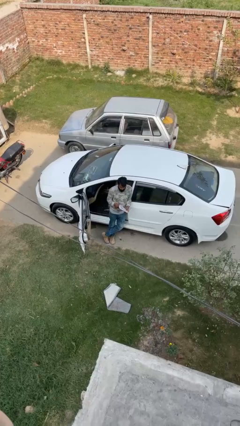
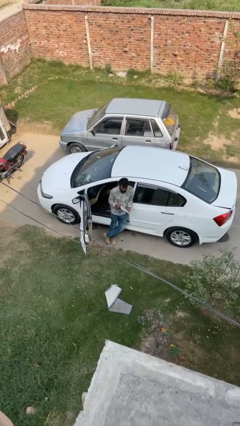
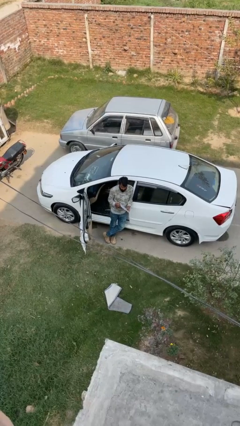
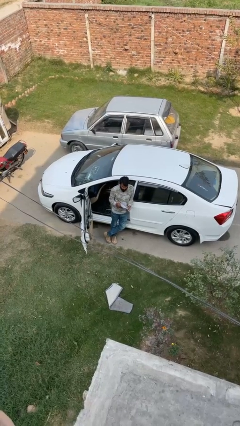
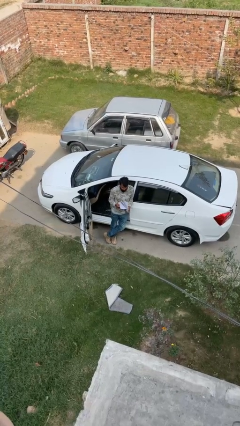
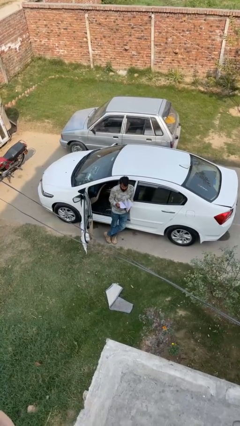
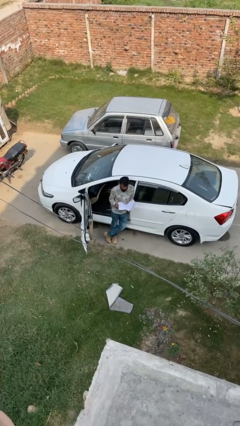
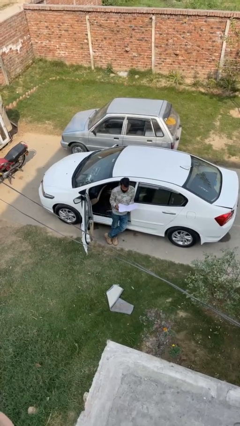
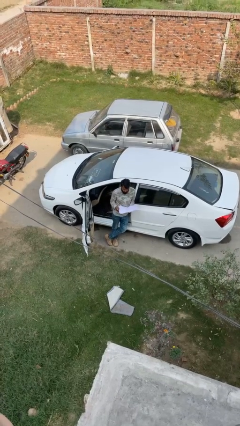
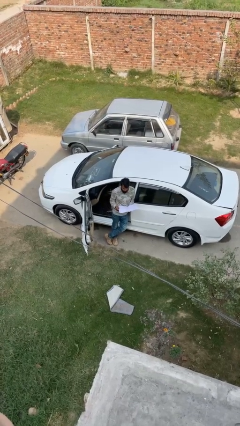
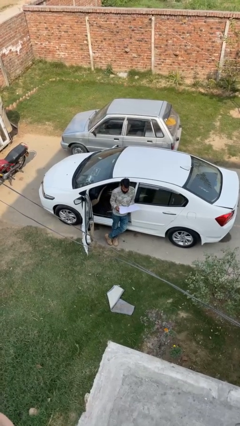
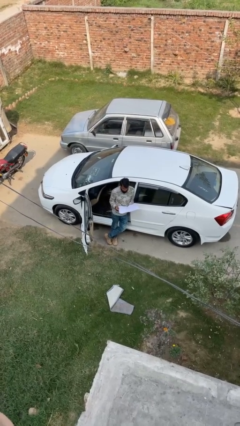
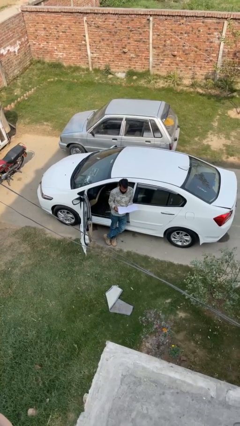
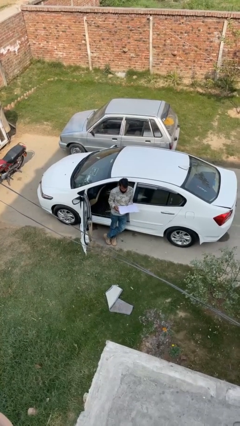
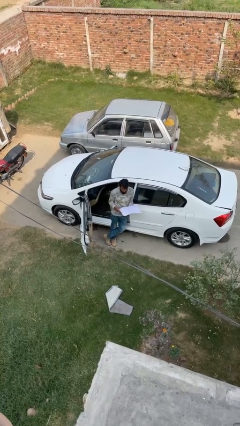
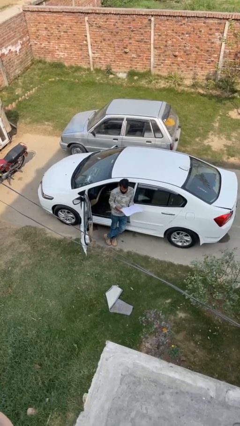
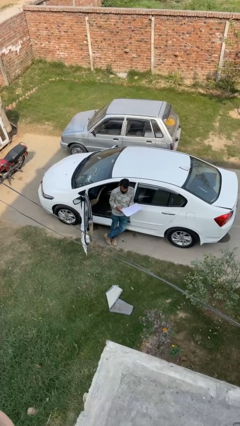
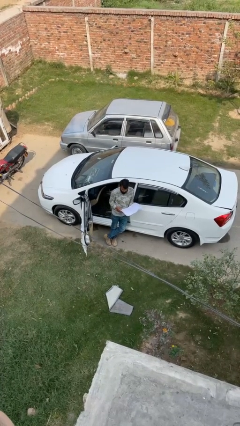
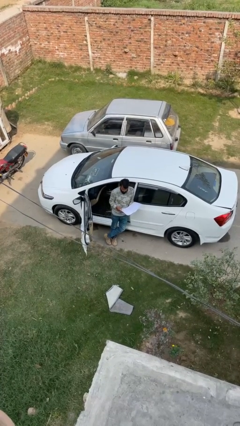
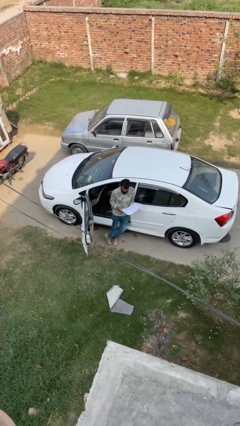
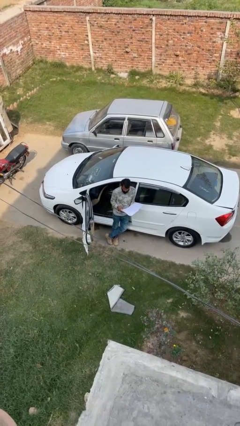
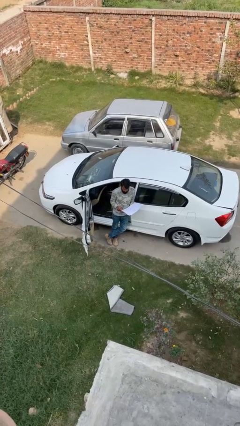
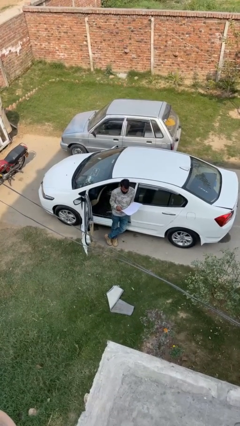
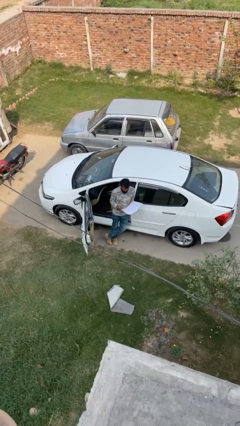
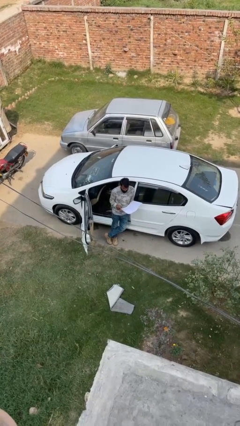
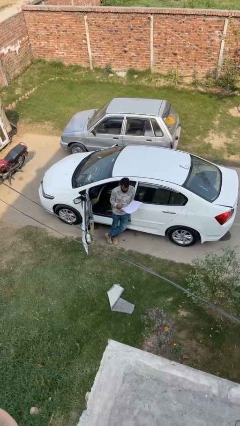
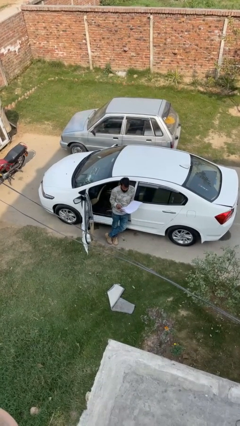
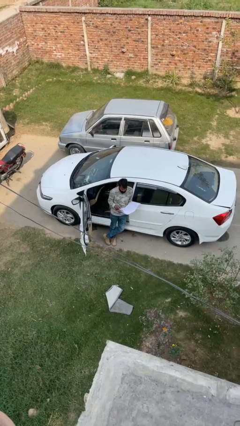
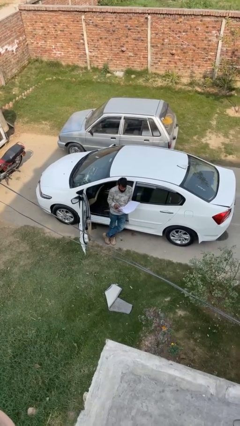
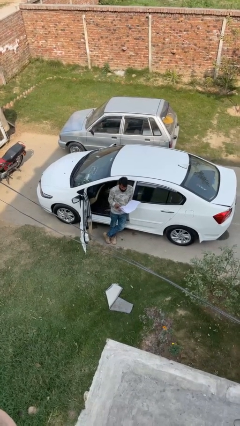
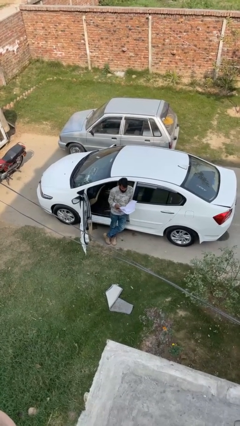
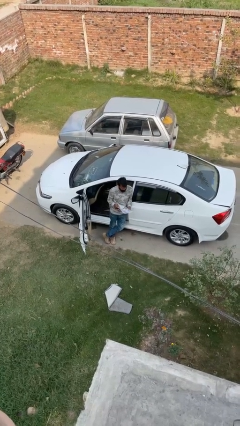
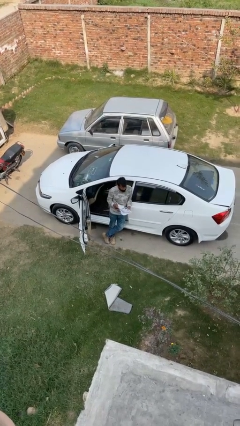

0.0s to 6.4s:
person reads document

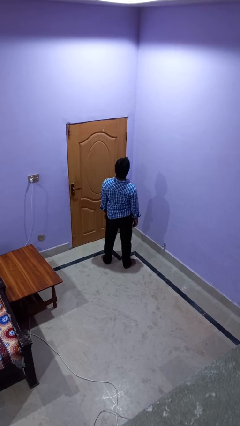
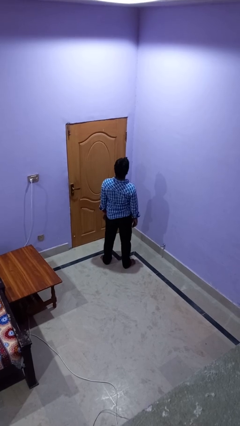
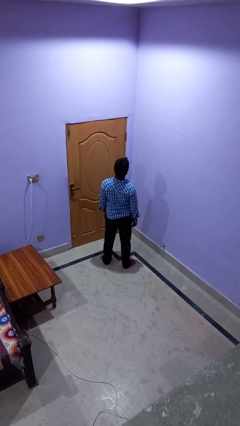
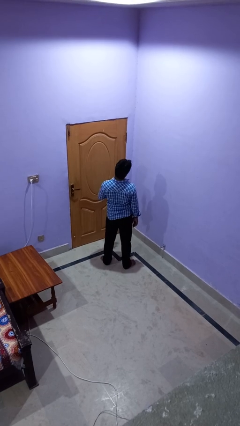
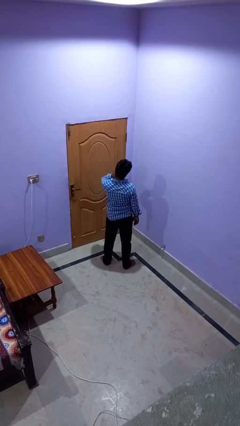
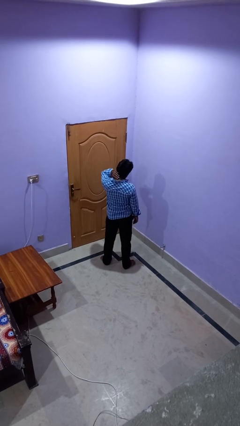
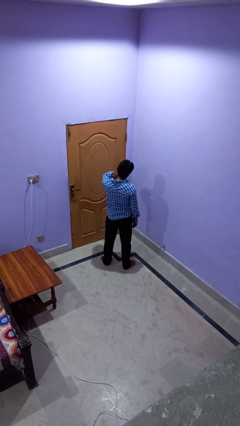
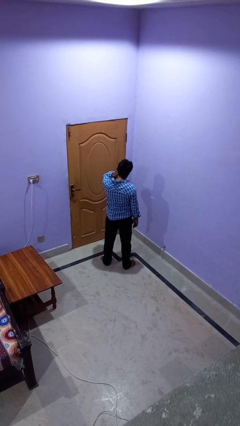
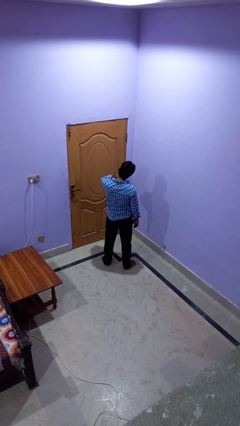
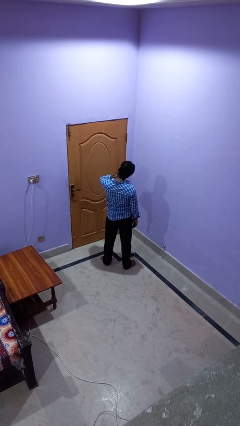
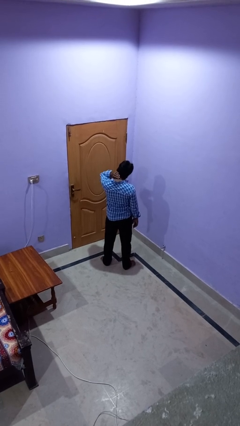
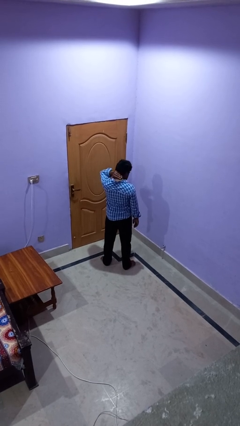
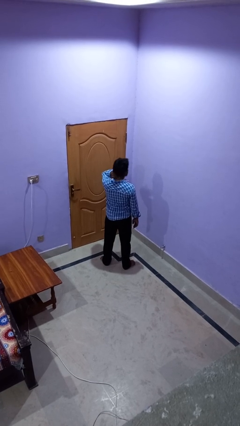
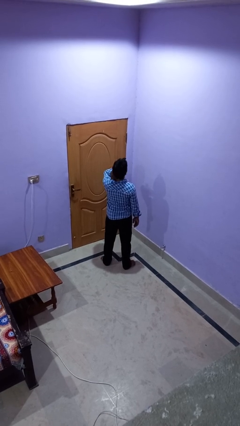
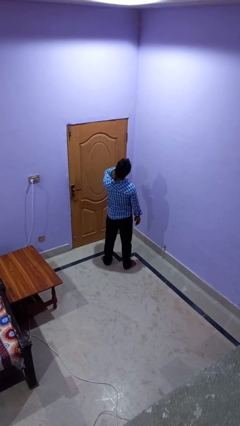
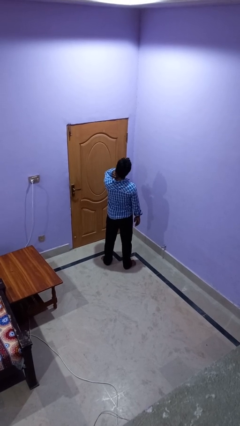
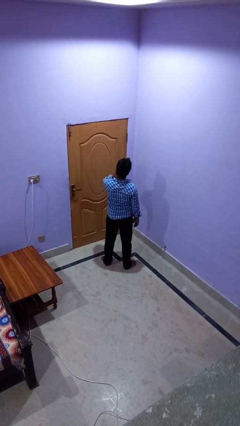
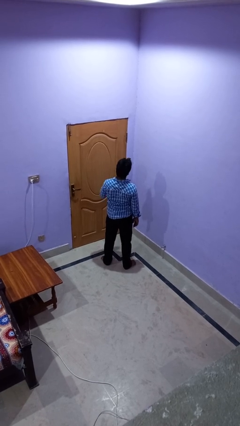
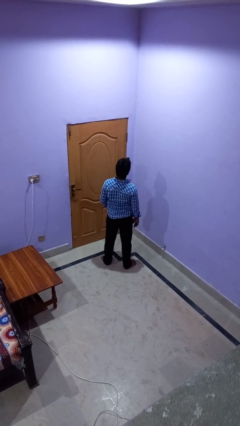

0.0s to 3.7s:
person rubs neck

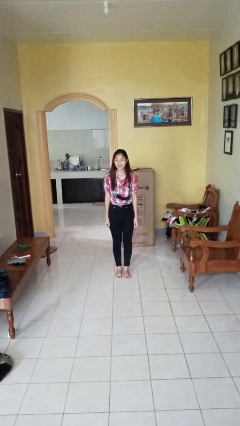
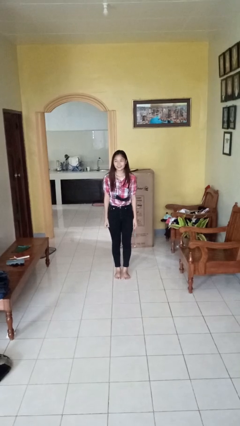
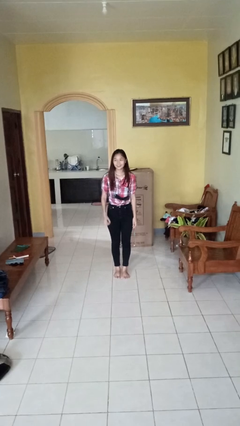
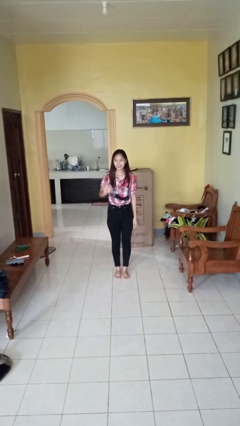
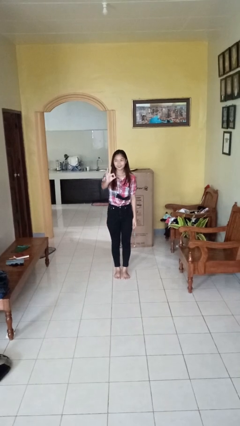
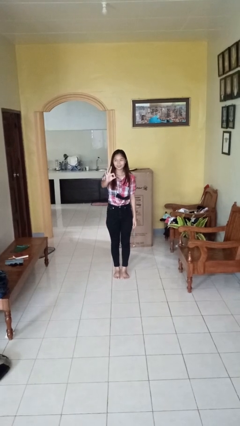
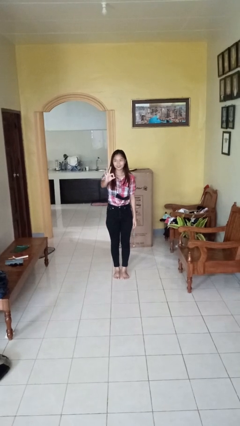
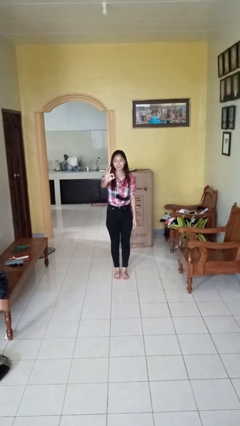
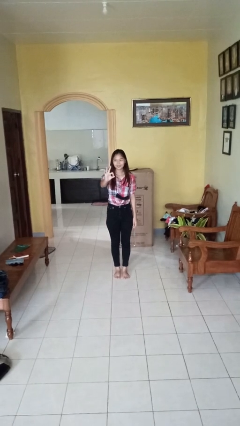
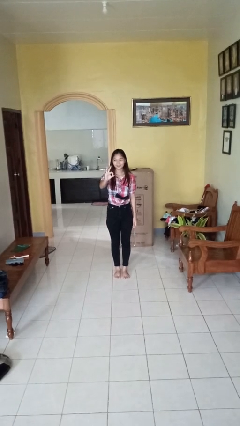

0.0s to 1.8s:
person gestures number three

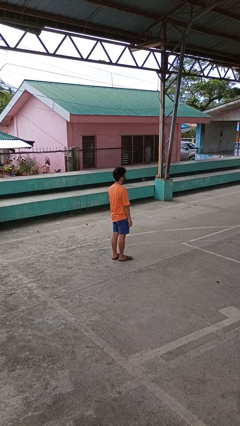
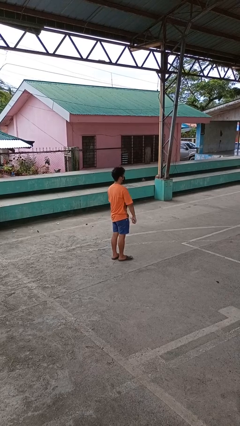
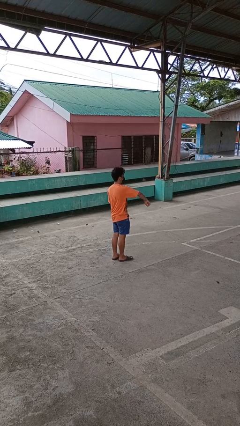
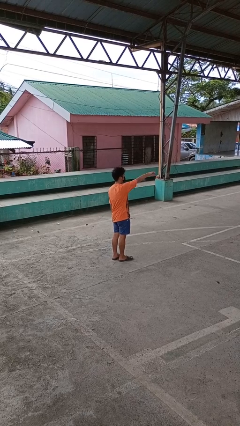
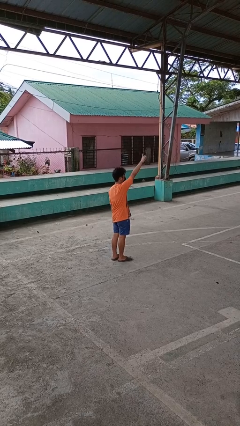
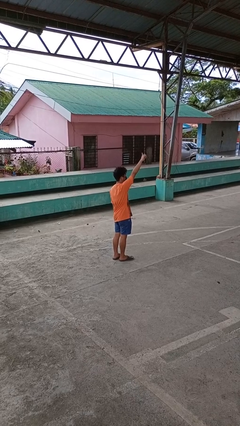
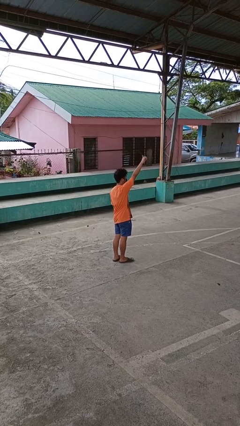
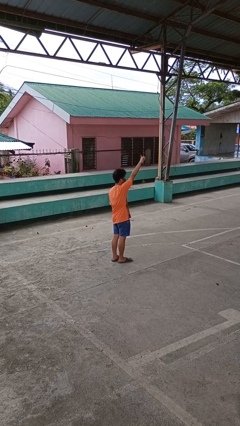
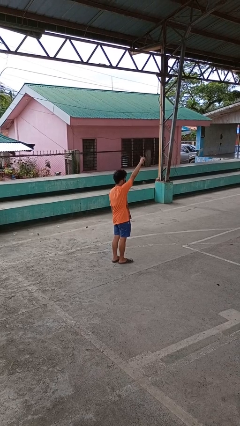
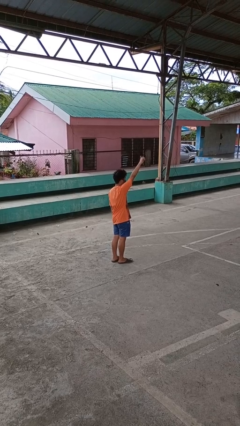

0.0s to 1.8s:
person gestures swipe up

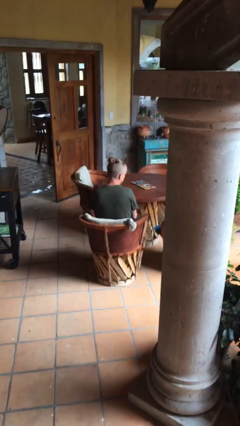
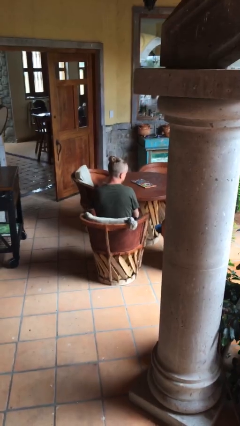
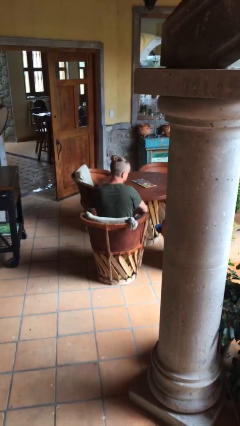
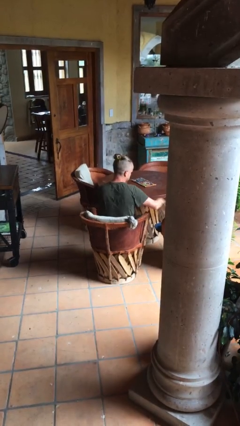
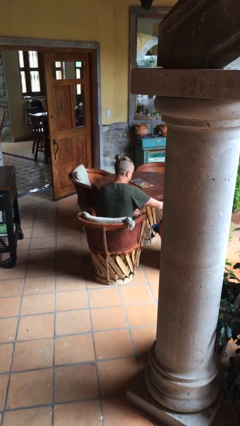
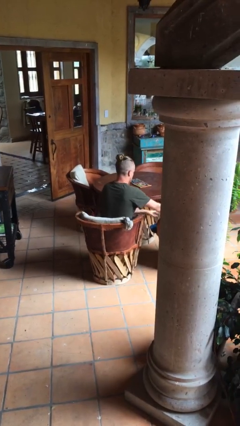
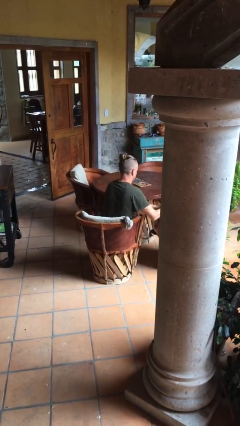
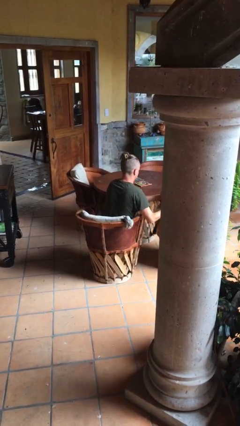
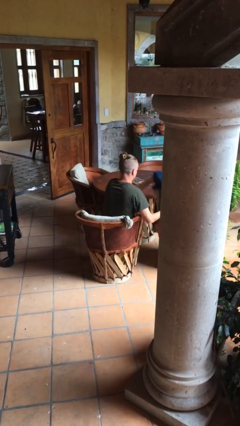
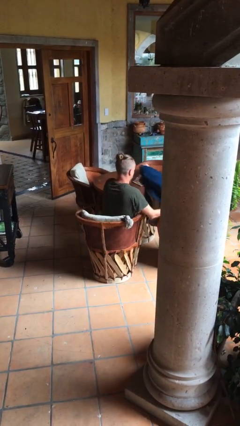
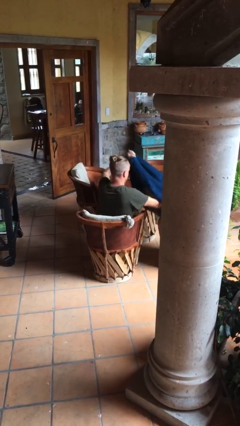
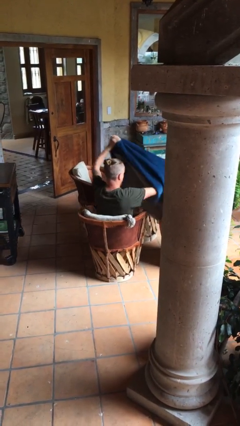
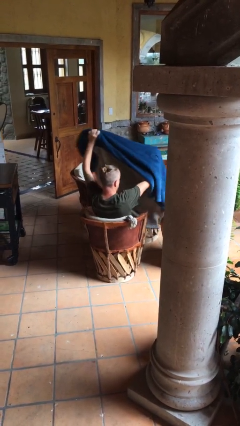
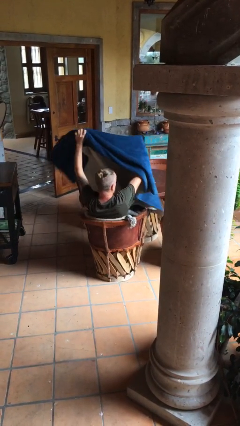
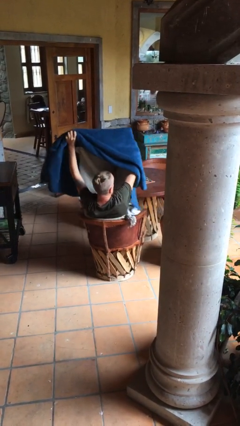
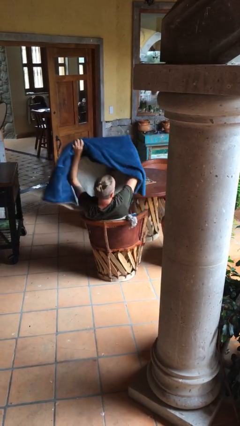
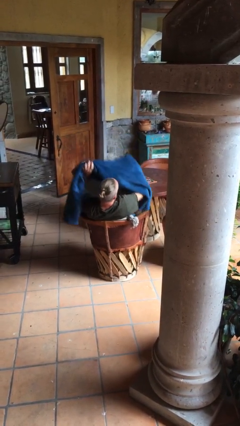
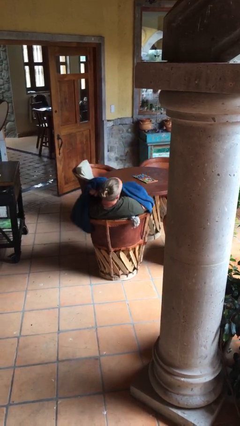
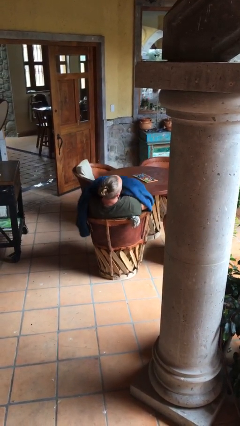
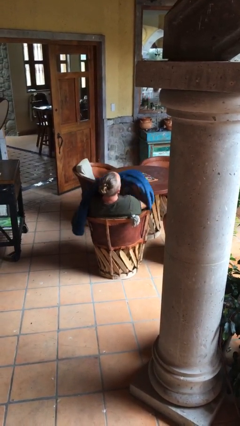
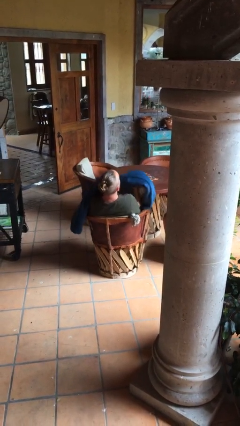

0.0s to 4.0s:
person covers with blanket
